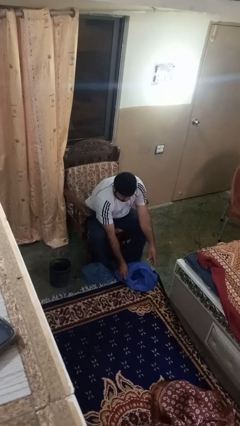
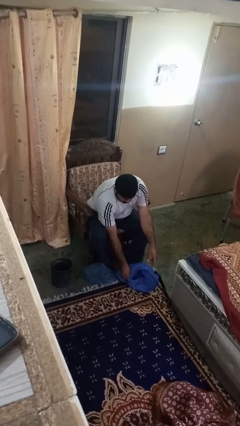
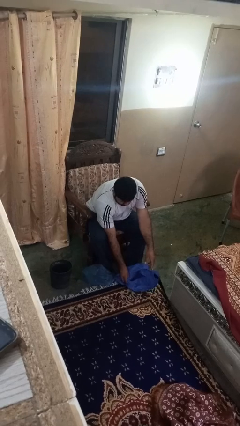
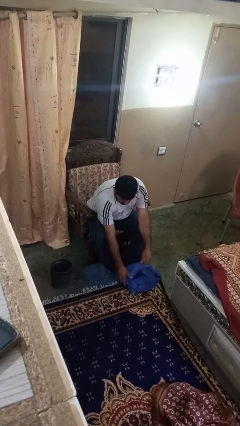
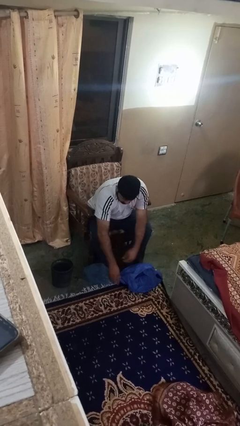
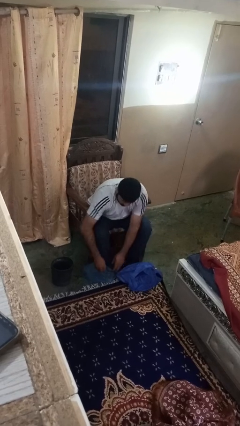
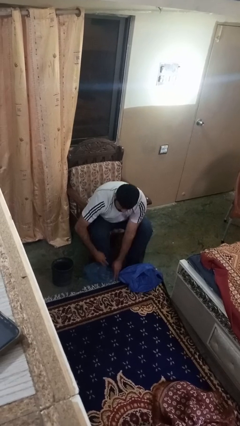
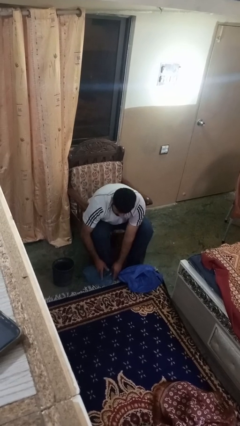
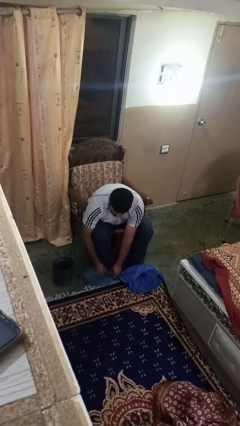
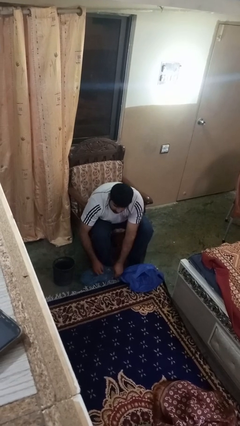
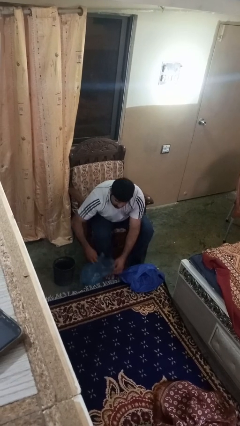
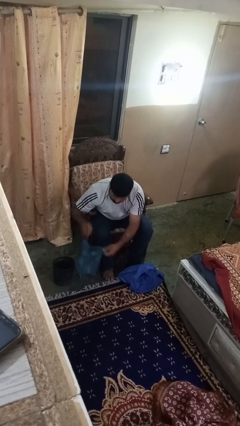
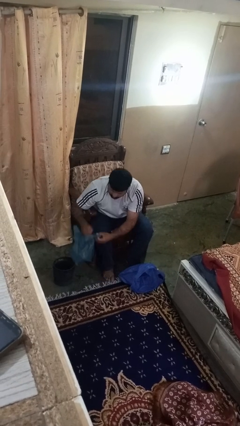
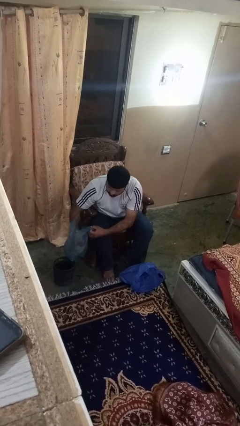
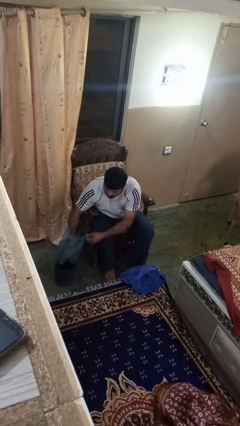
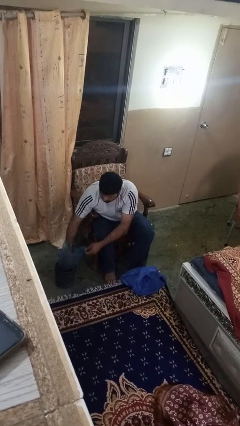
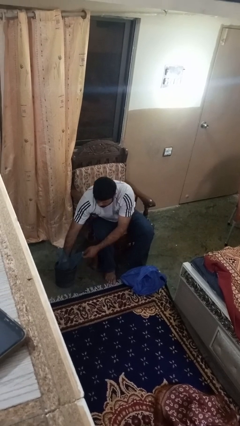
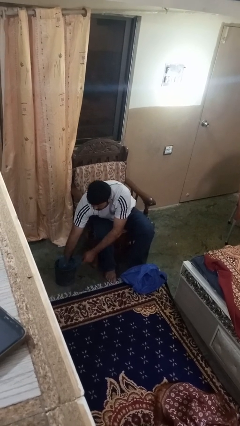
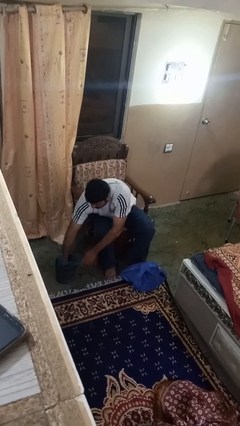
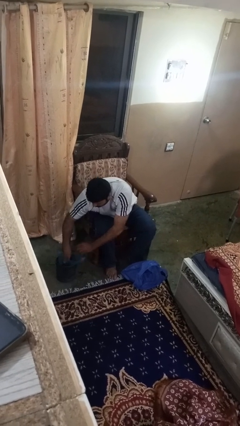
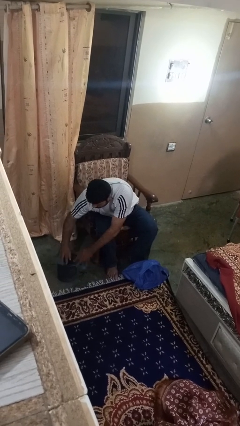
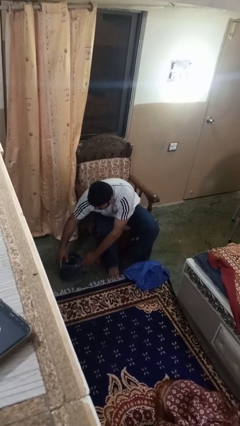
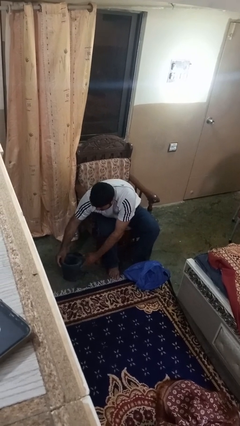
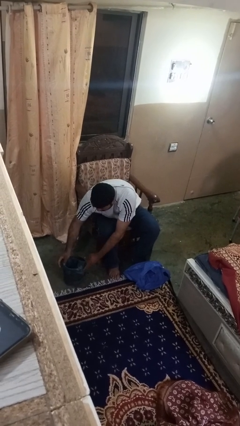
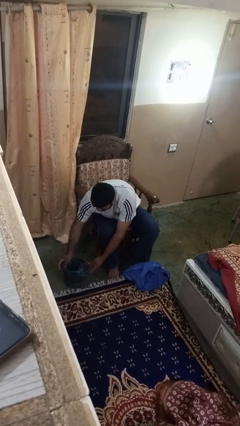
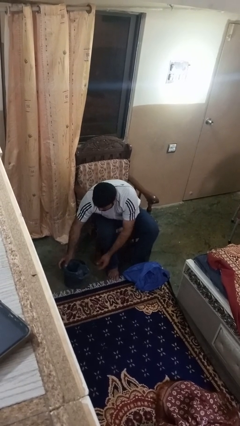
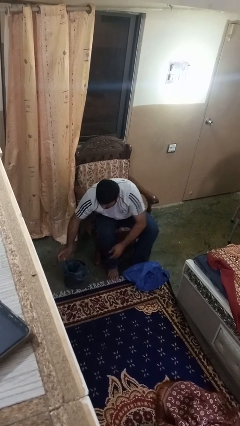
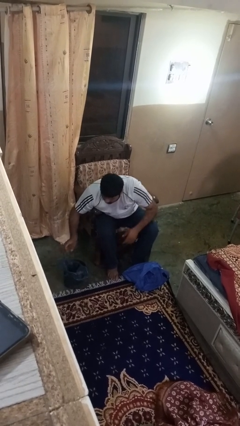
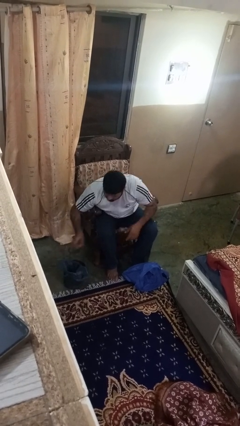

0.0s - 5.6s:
person inserts trashbag into trashcan

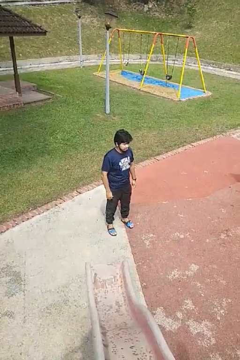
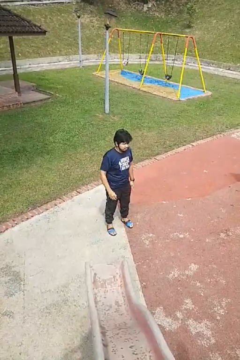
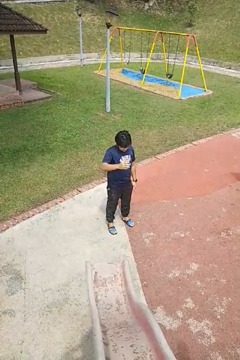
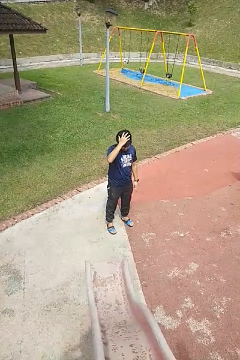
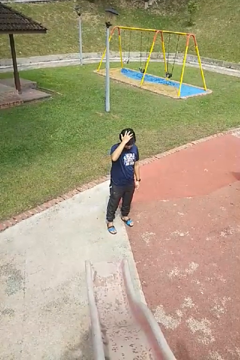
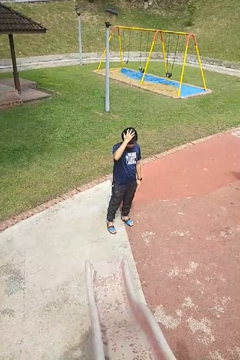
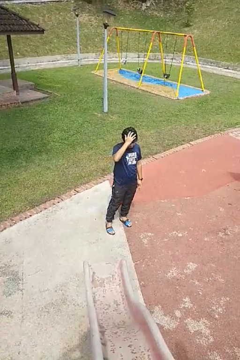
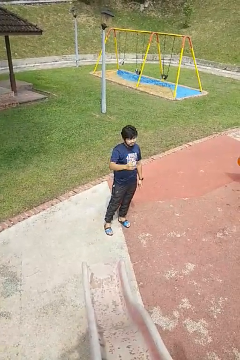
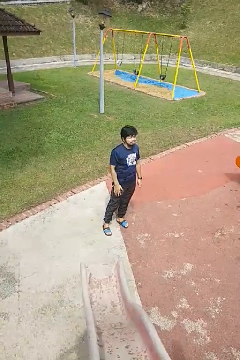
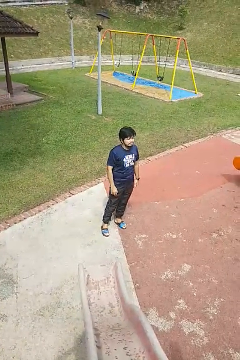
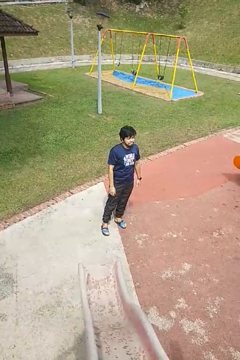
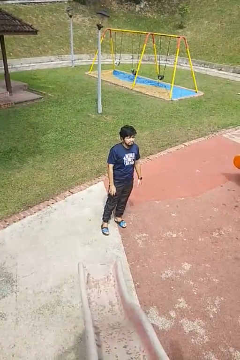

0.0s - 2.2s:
person pats head

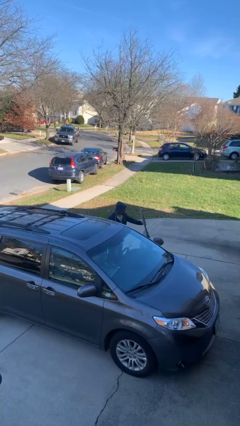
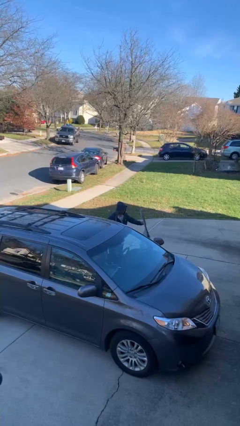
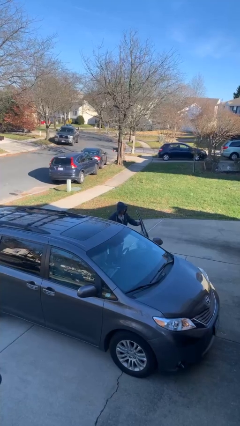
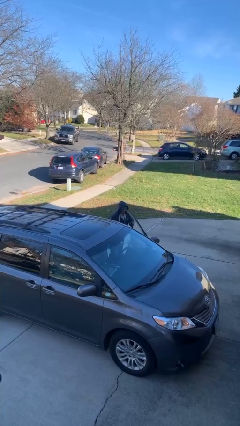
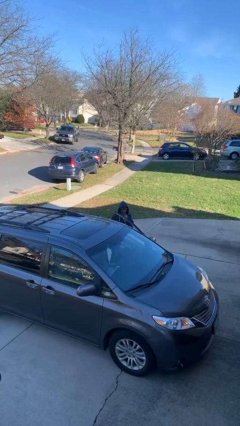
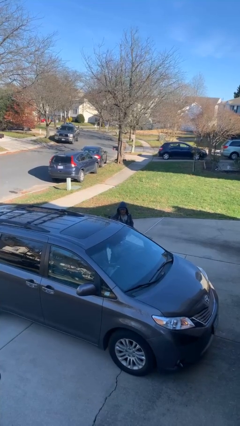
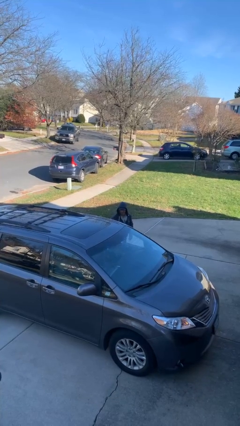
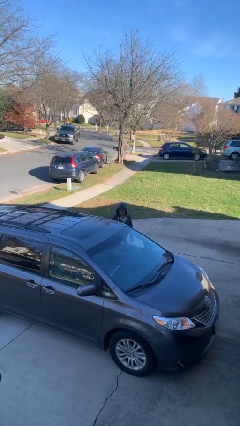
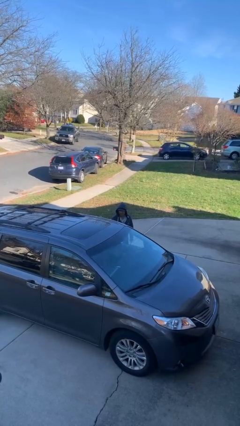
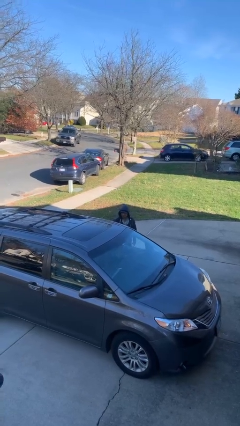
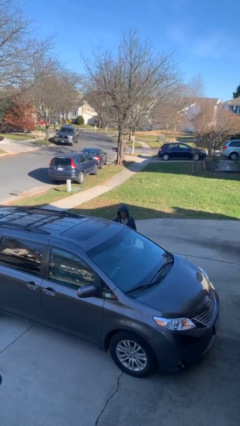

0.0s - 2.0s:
person closes car door

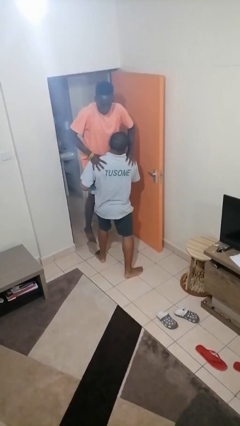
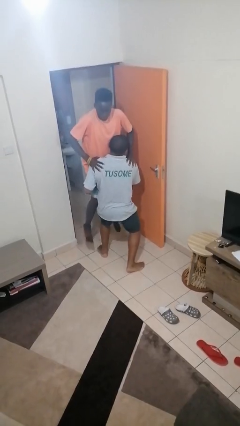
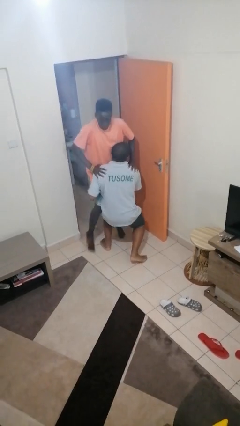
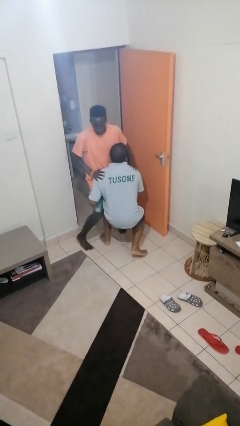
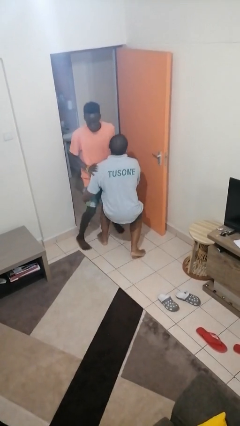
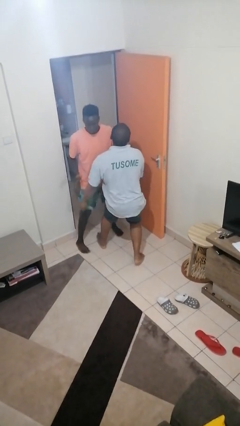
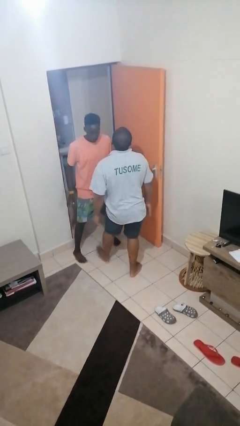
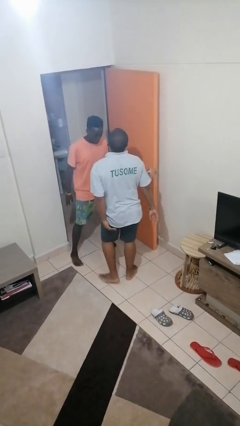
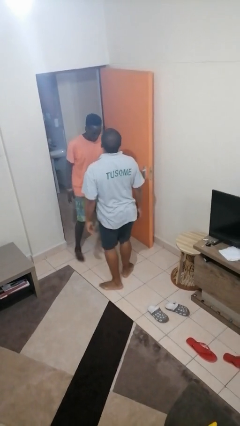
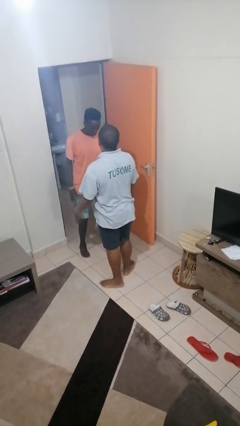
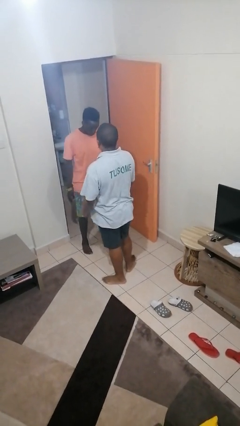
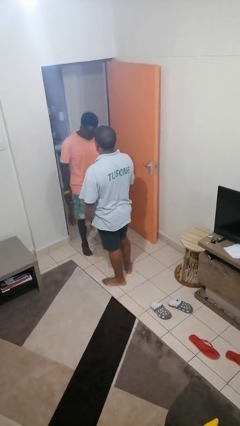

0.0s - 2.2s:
person puts down person

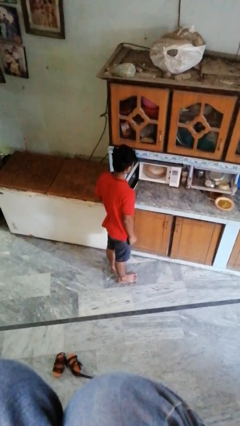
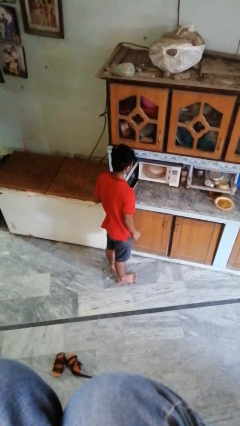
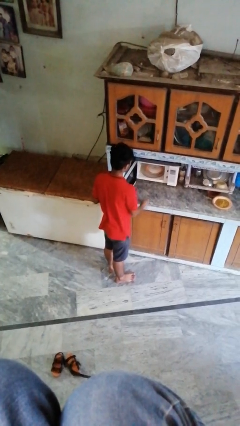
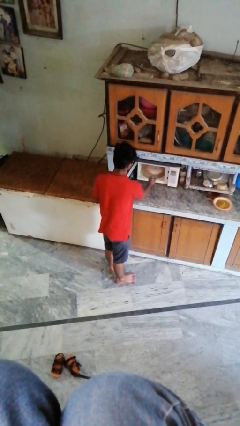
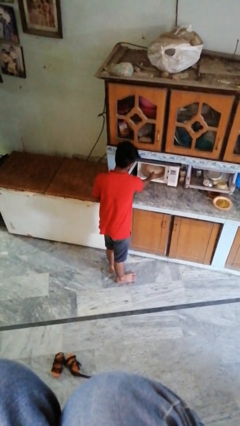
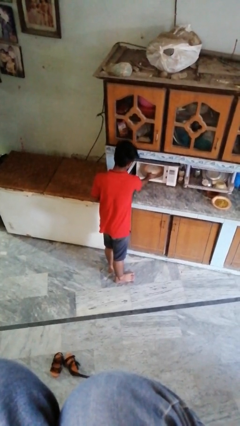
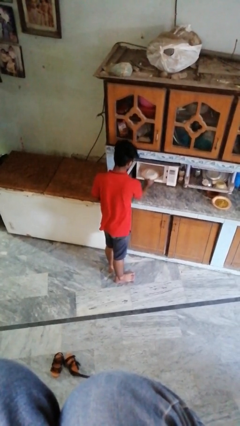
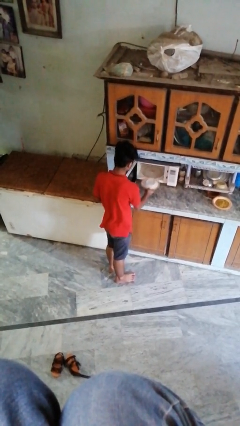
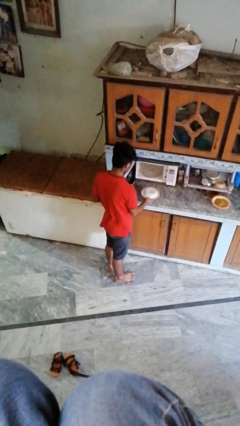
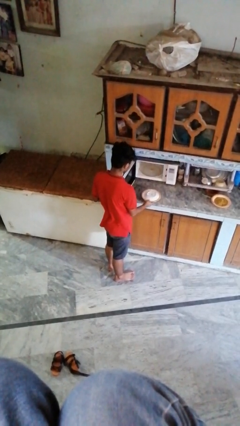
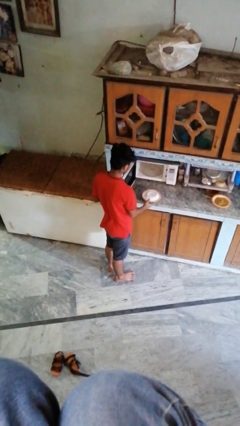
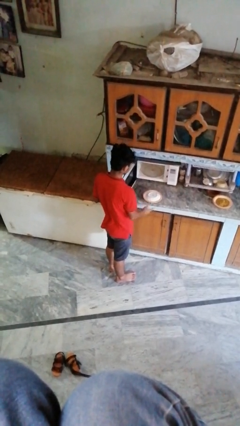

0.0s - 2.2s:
person takes object from oven

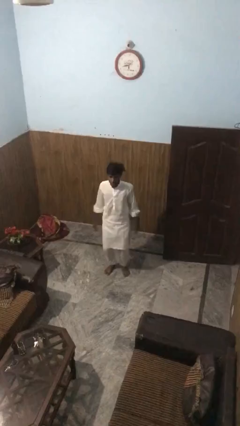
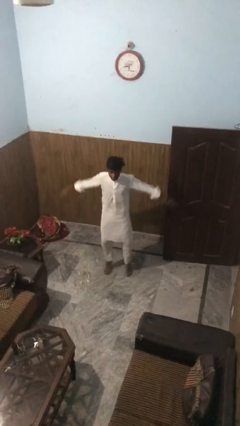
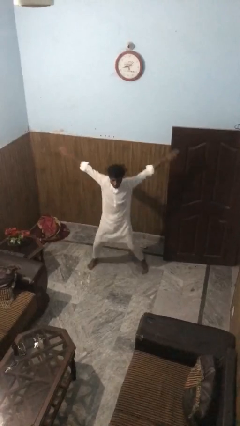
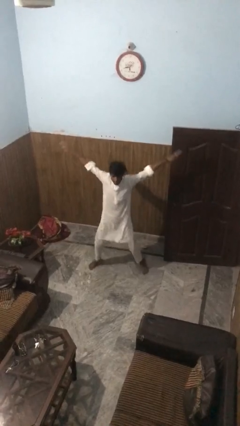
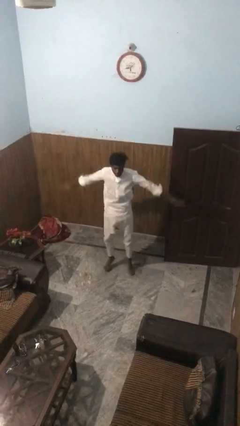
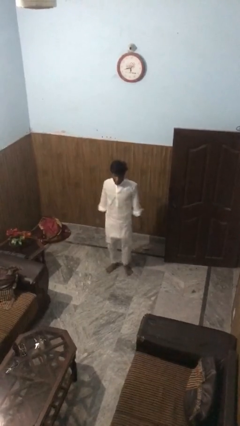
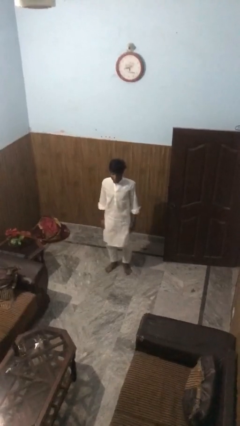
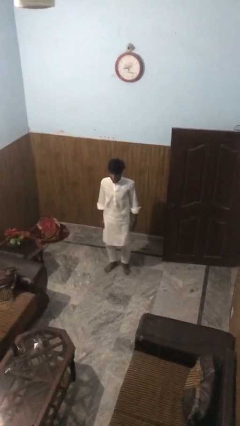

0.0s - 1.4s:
person exercises with jumping jacks

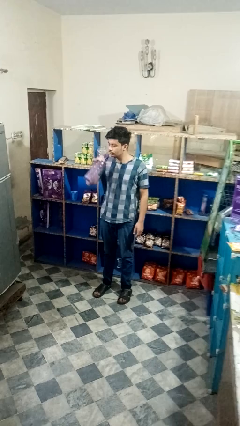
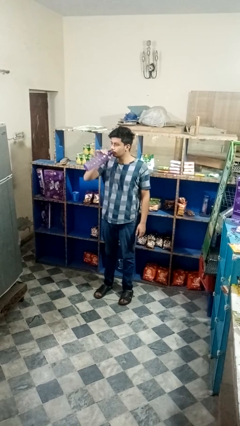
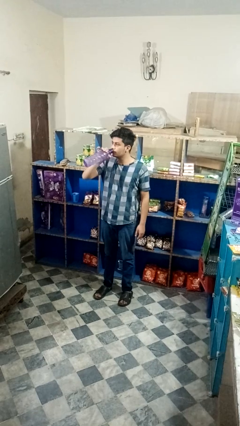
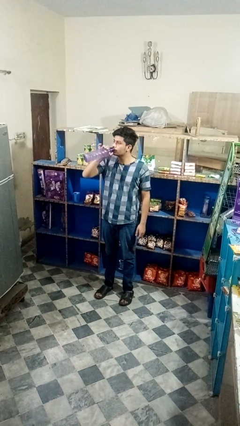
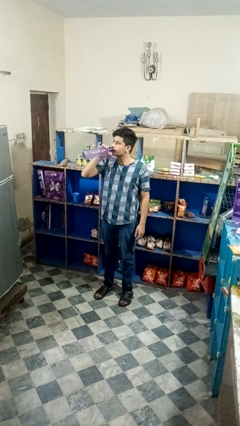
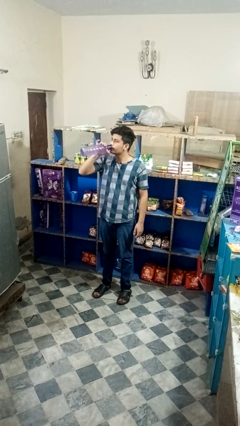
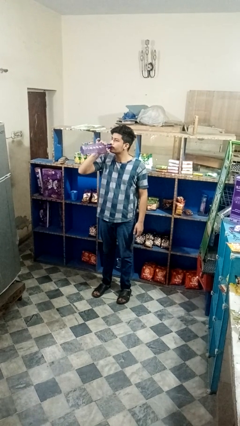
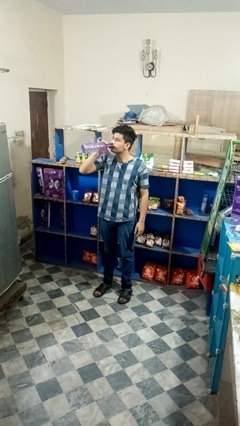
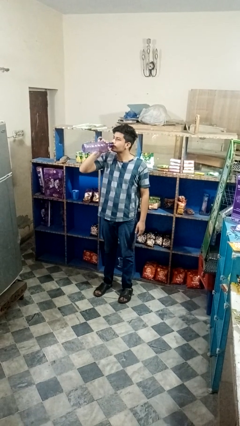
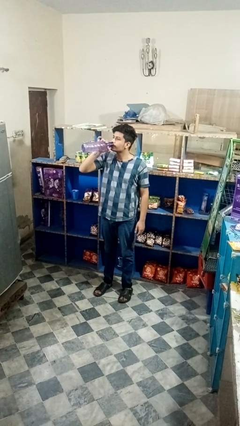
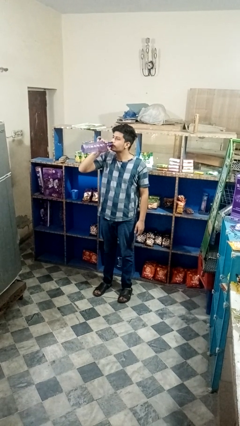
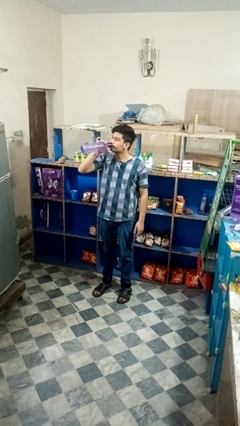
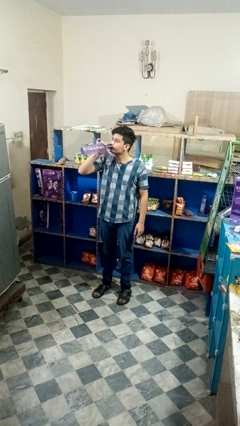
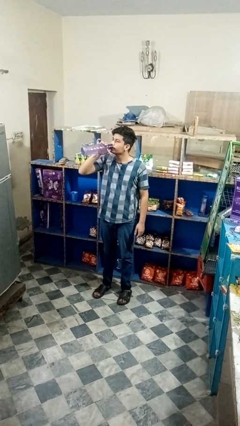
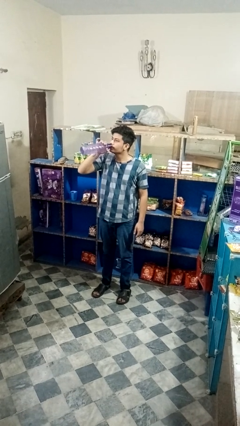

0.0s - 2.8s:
person drinks from bottle
